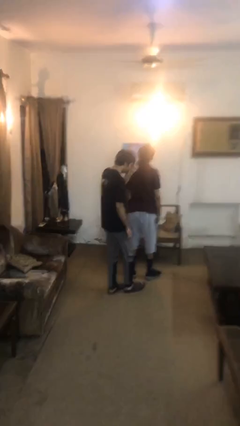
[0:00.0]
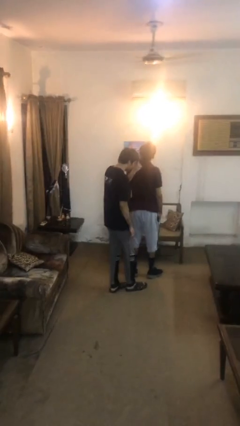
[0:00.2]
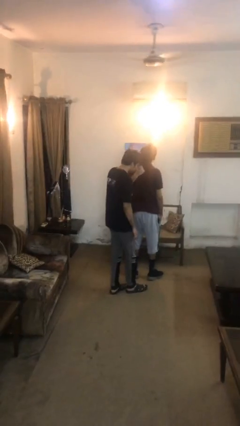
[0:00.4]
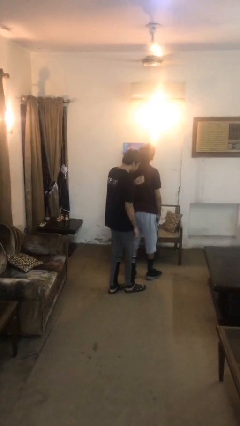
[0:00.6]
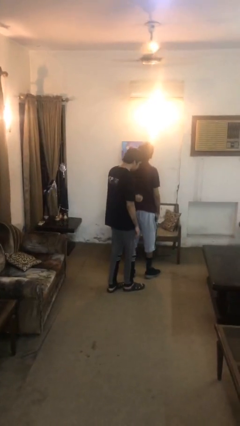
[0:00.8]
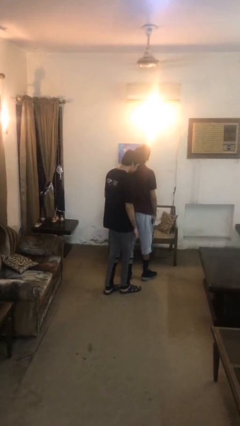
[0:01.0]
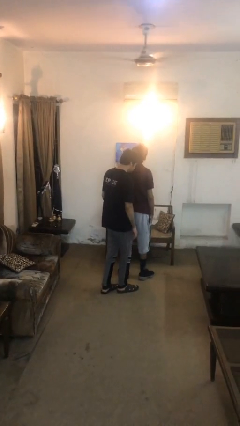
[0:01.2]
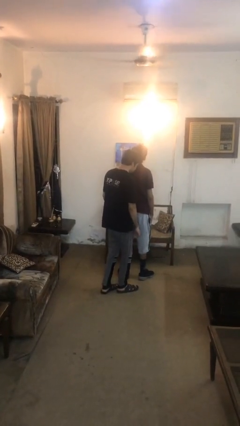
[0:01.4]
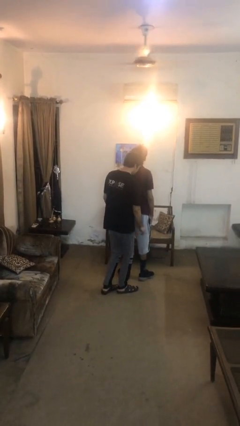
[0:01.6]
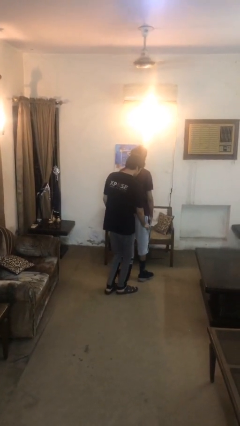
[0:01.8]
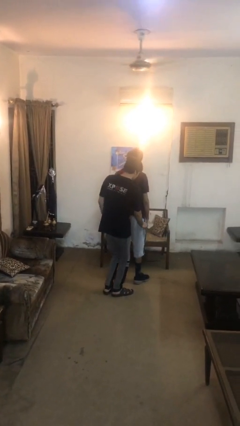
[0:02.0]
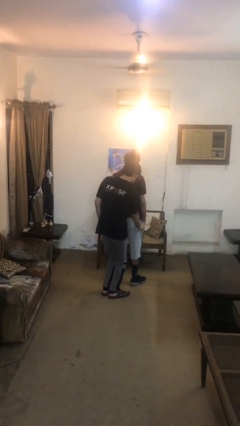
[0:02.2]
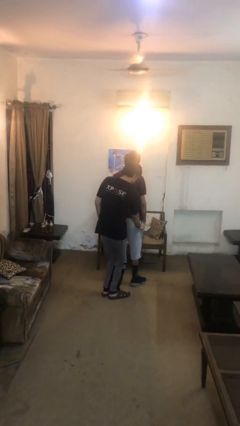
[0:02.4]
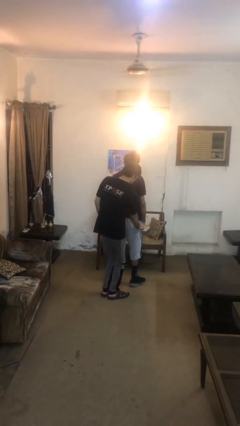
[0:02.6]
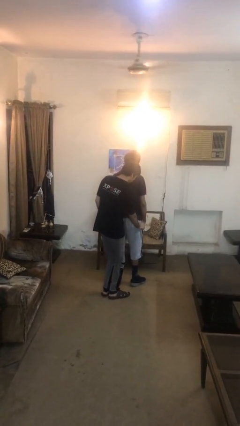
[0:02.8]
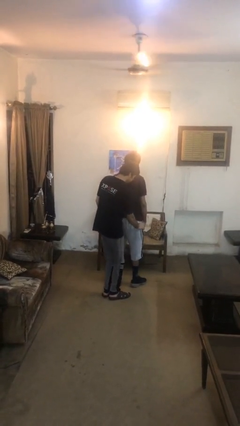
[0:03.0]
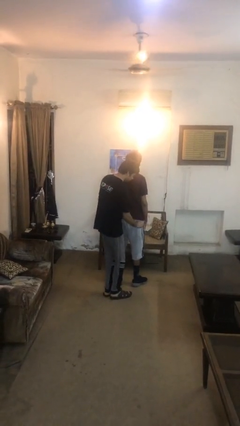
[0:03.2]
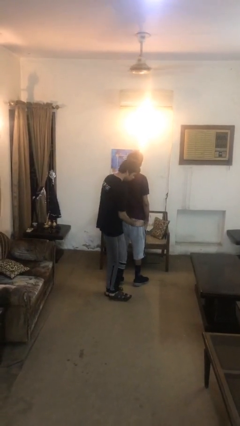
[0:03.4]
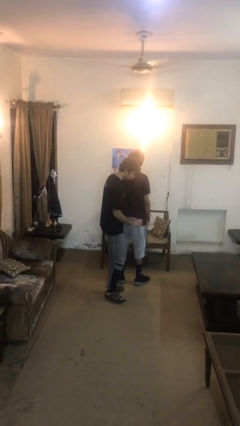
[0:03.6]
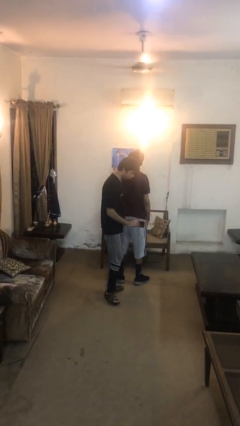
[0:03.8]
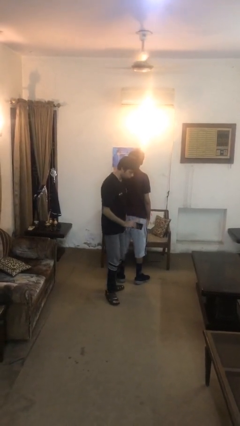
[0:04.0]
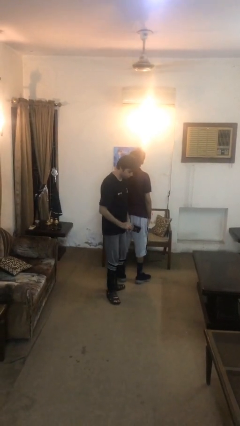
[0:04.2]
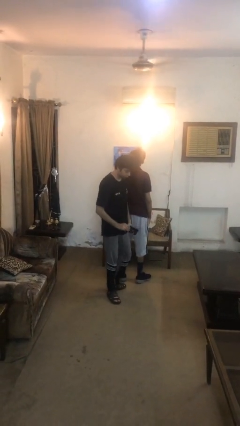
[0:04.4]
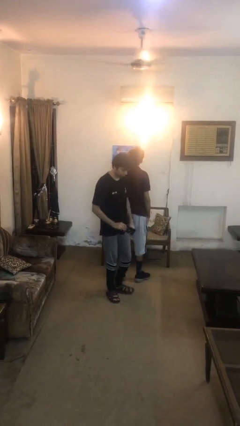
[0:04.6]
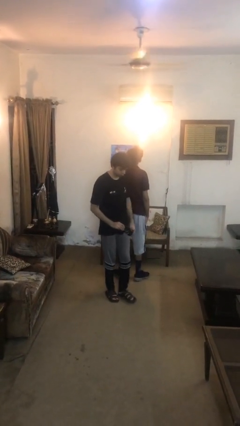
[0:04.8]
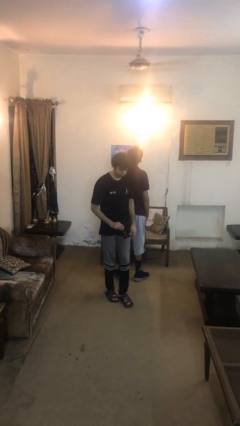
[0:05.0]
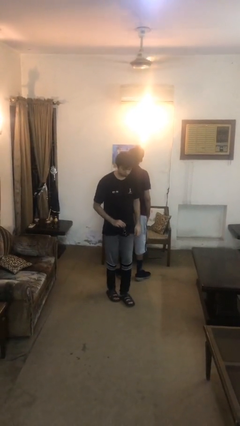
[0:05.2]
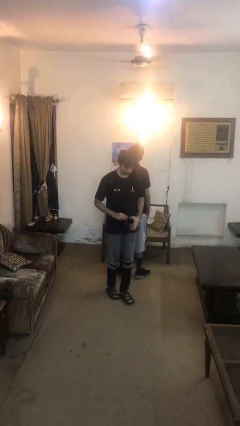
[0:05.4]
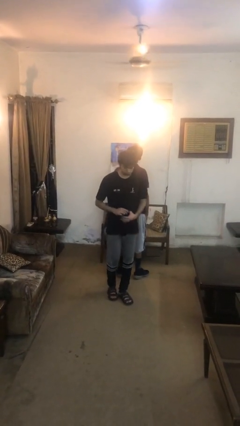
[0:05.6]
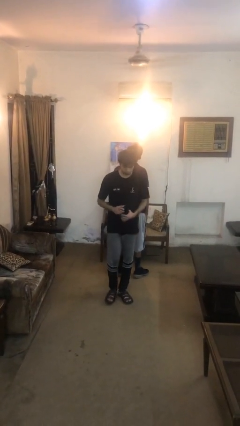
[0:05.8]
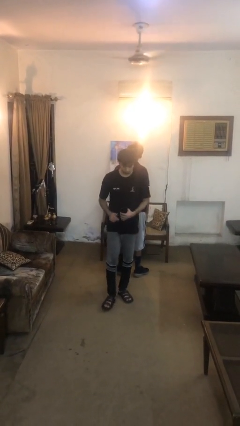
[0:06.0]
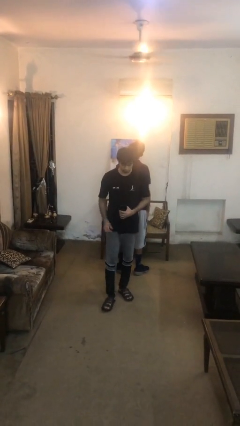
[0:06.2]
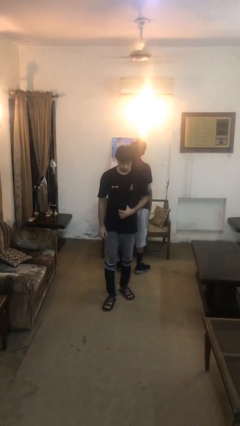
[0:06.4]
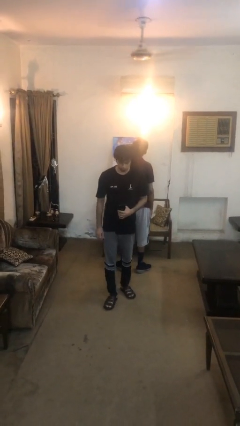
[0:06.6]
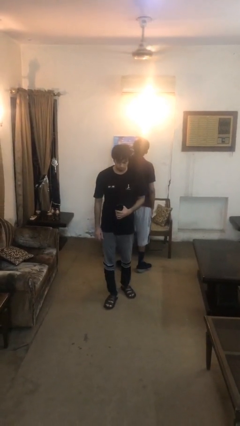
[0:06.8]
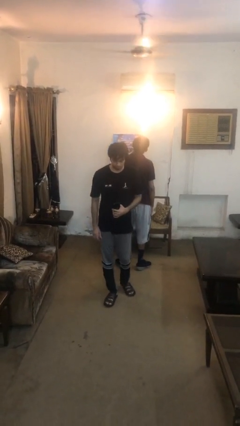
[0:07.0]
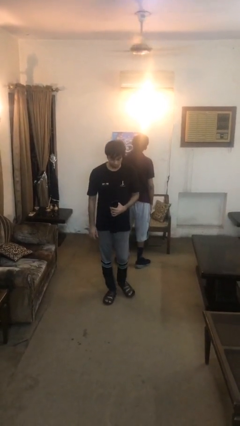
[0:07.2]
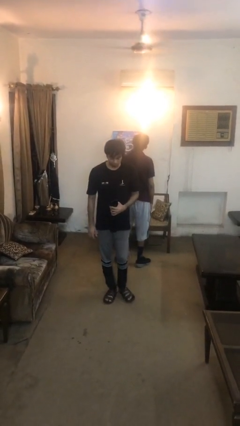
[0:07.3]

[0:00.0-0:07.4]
person steals object from person

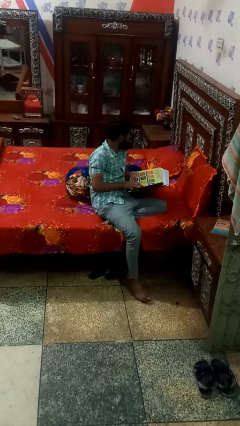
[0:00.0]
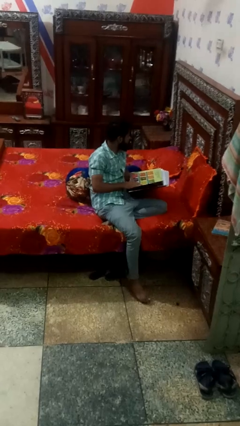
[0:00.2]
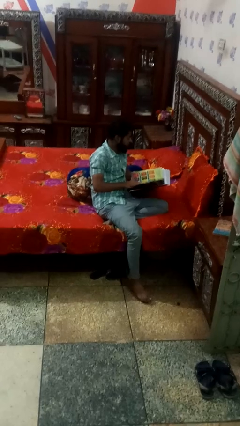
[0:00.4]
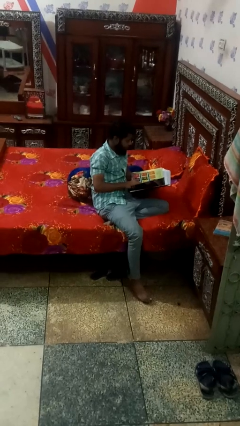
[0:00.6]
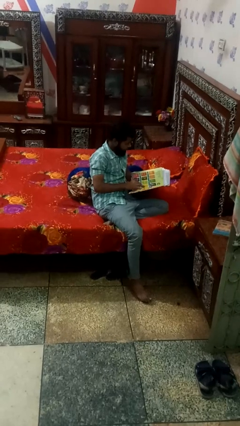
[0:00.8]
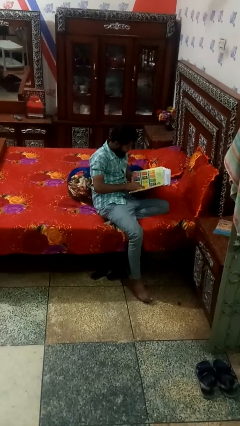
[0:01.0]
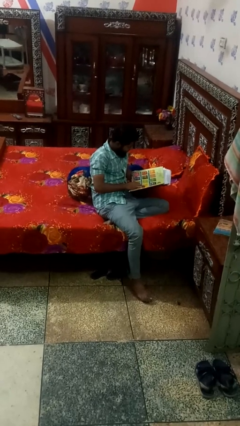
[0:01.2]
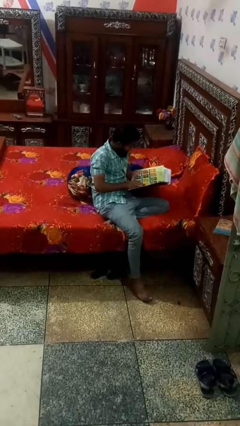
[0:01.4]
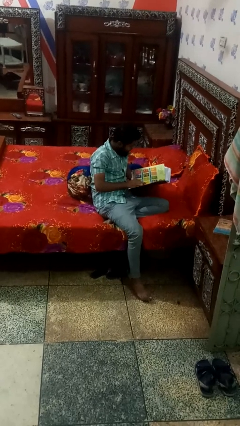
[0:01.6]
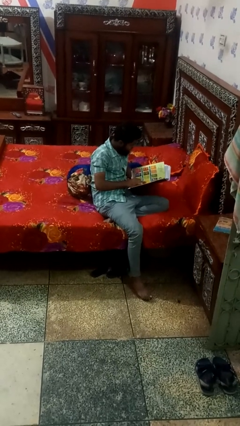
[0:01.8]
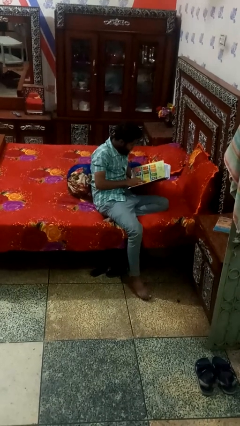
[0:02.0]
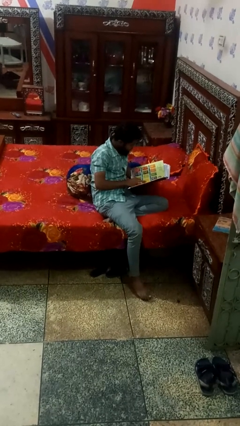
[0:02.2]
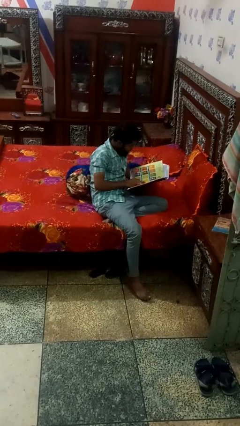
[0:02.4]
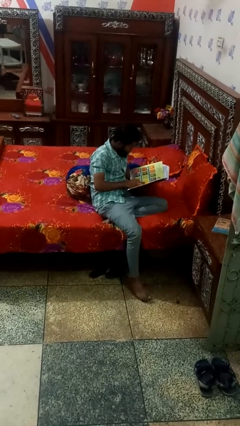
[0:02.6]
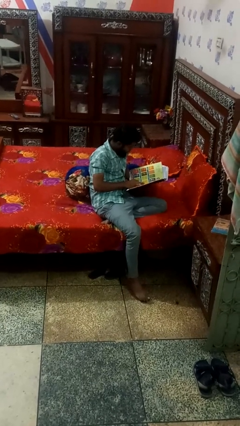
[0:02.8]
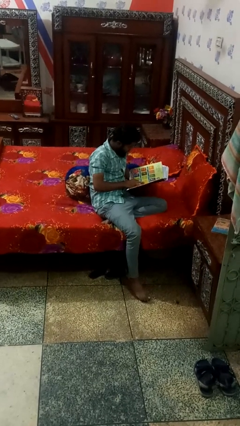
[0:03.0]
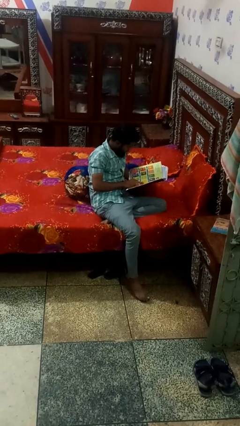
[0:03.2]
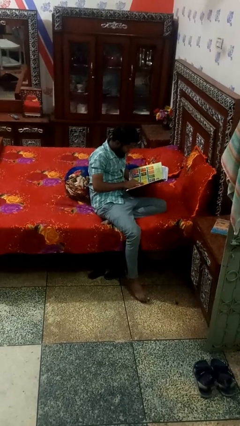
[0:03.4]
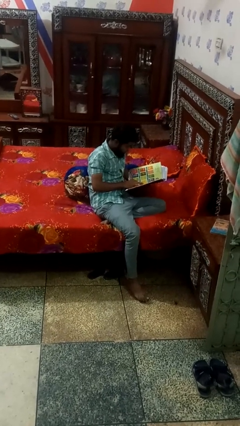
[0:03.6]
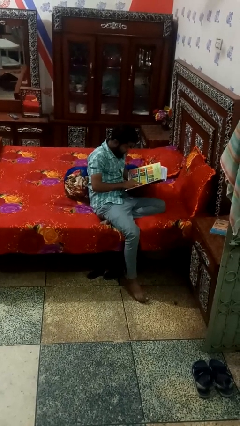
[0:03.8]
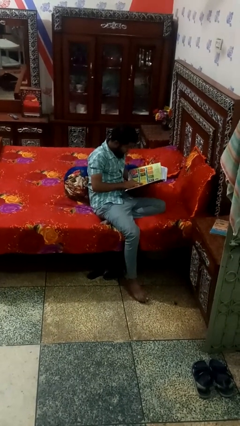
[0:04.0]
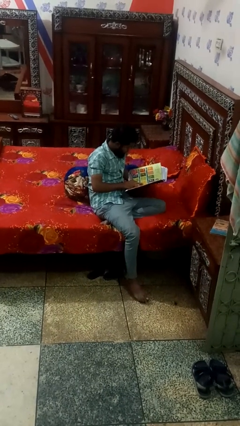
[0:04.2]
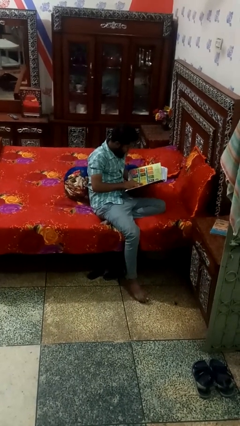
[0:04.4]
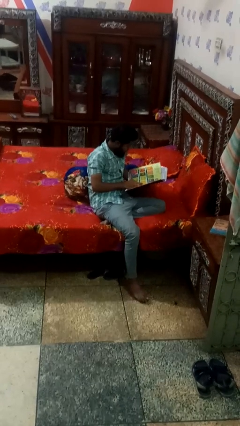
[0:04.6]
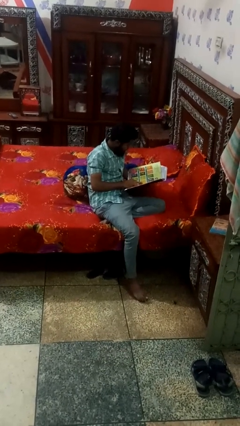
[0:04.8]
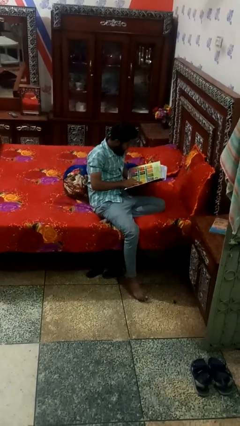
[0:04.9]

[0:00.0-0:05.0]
person reads magazine

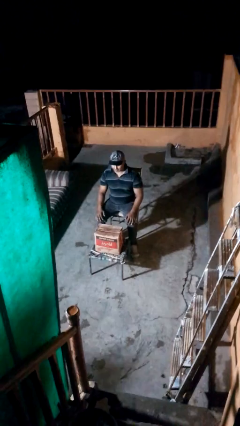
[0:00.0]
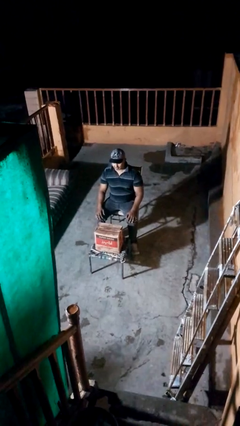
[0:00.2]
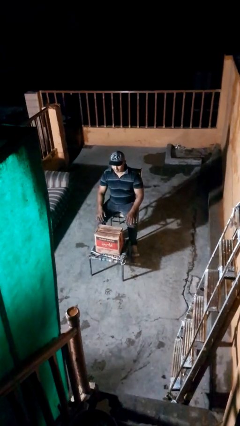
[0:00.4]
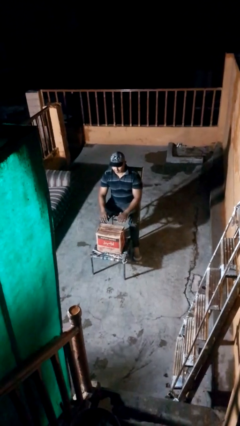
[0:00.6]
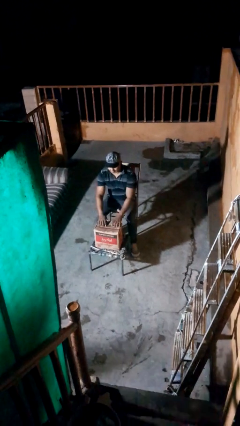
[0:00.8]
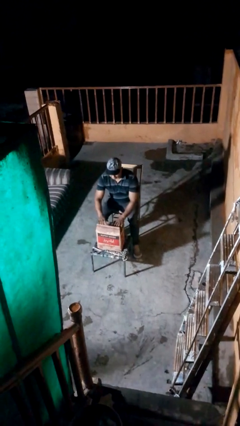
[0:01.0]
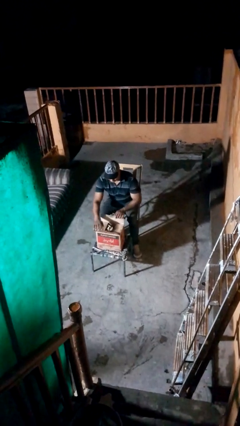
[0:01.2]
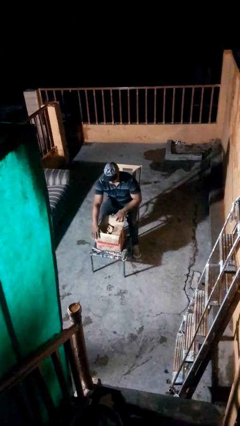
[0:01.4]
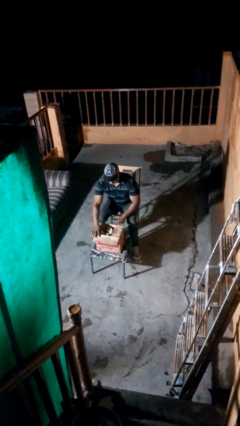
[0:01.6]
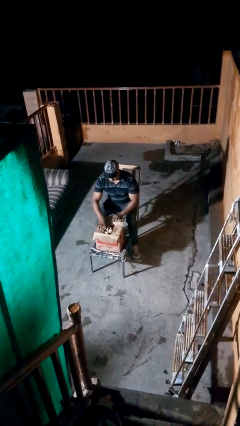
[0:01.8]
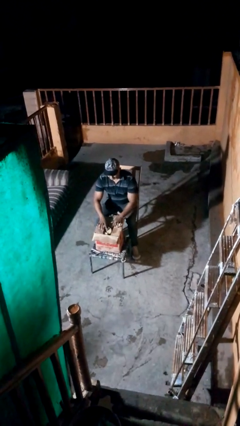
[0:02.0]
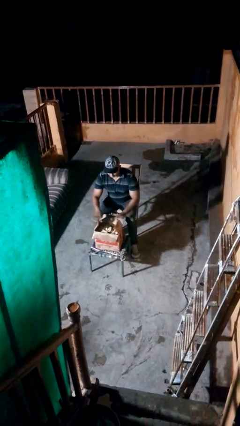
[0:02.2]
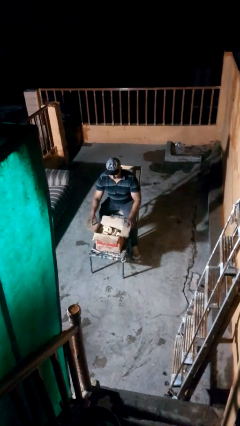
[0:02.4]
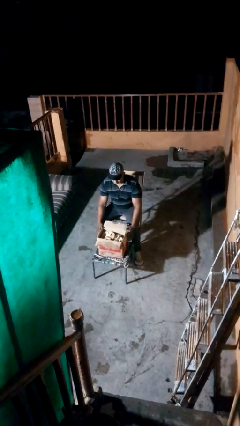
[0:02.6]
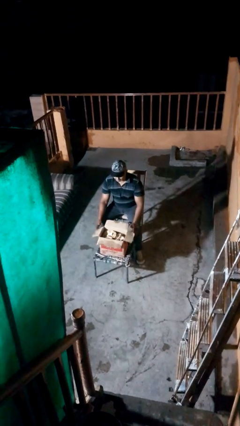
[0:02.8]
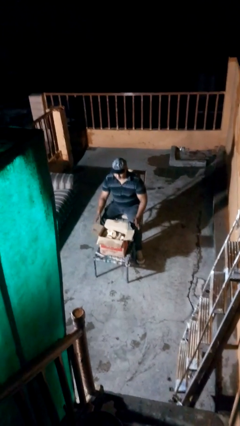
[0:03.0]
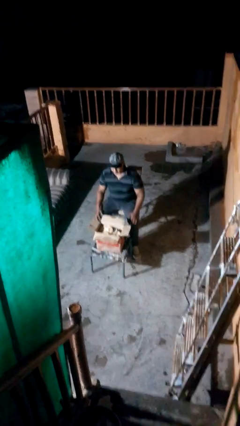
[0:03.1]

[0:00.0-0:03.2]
person opens box

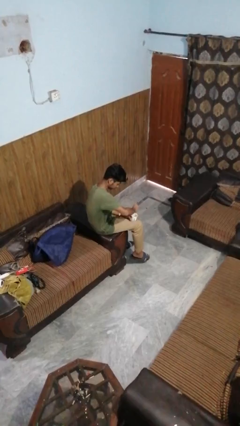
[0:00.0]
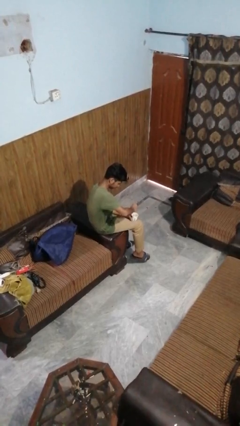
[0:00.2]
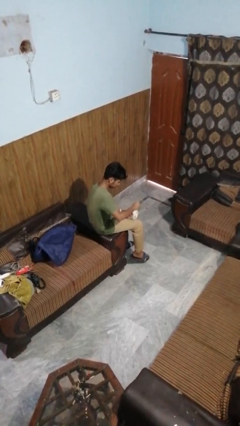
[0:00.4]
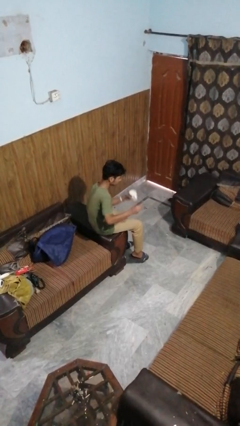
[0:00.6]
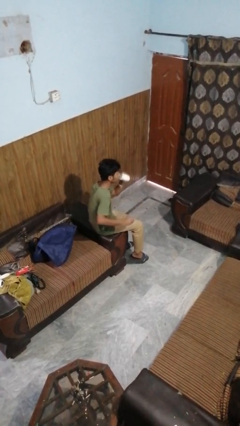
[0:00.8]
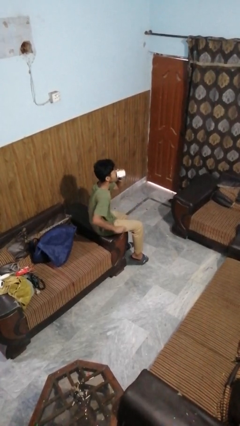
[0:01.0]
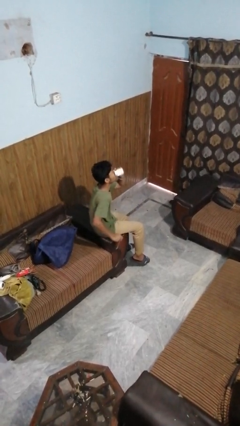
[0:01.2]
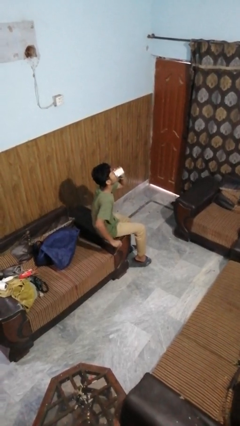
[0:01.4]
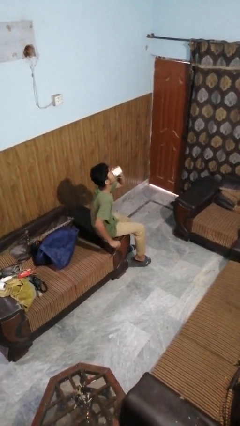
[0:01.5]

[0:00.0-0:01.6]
person drinks from mug

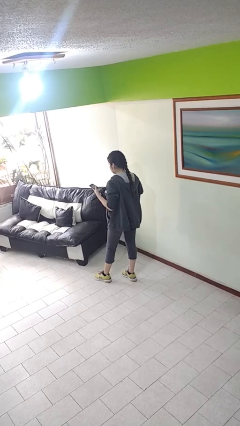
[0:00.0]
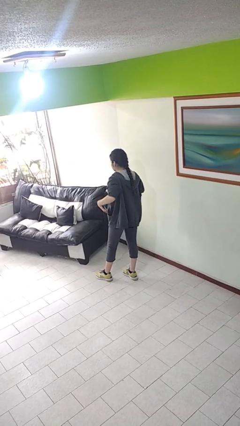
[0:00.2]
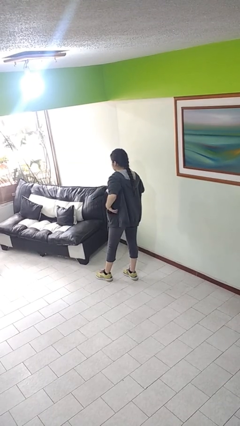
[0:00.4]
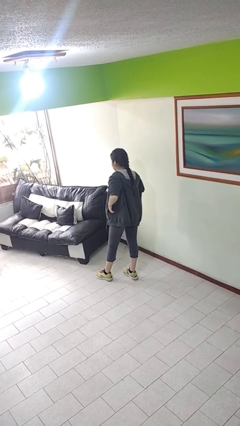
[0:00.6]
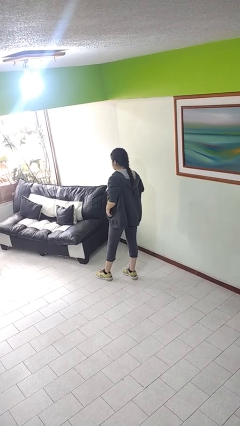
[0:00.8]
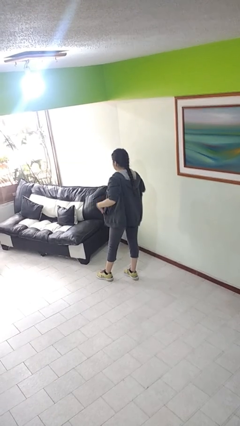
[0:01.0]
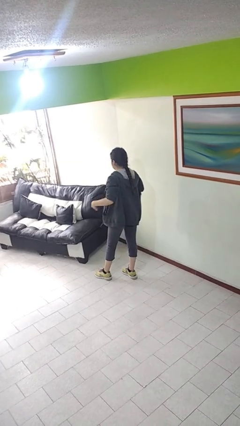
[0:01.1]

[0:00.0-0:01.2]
person puts phone into pocket
